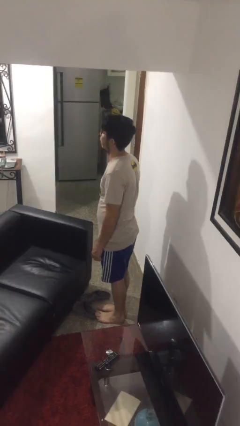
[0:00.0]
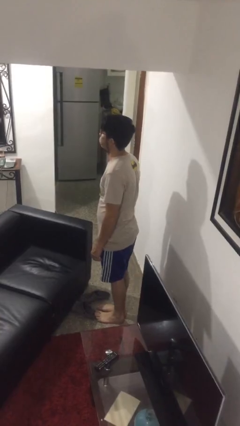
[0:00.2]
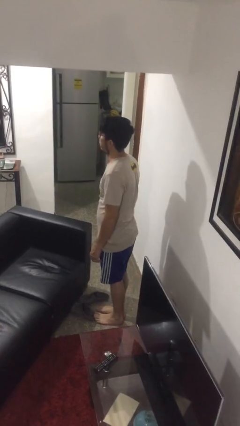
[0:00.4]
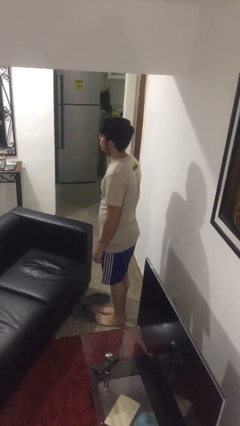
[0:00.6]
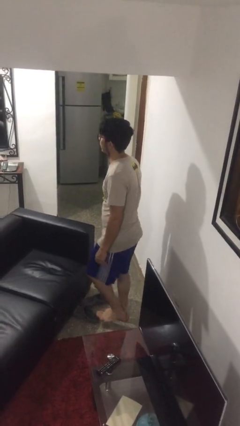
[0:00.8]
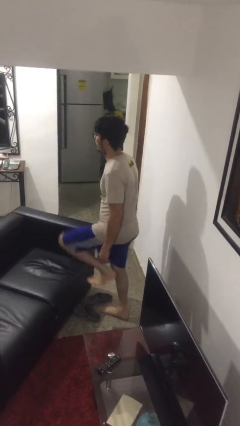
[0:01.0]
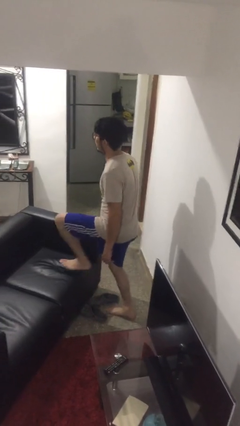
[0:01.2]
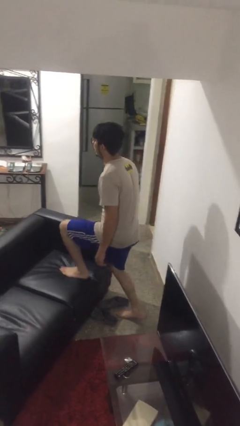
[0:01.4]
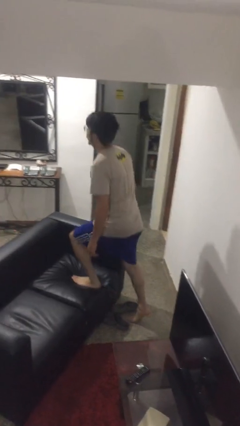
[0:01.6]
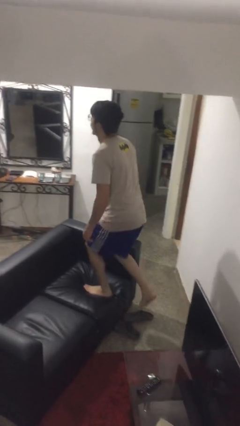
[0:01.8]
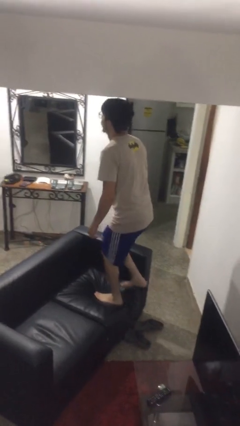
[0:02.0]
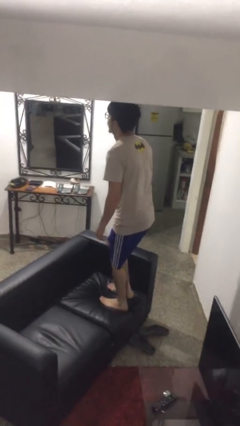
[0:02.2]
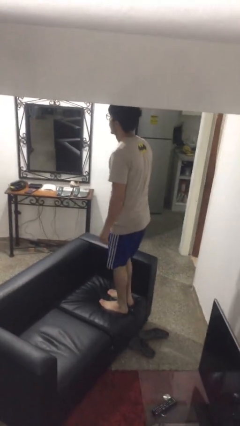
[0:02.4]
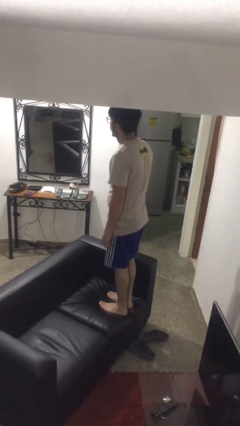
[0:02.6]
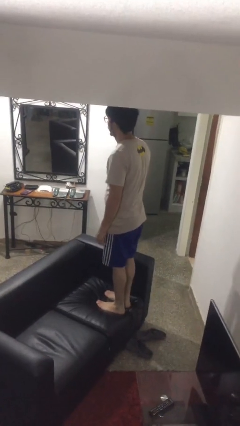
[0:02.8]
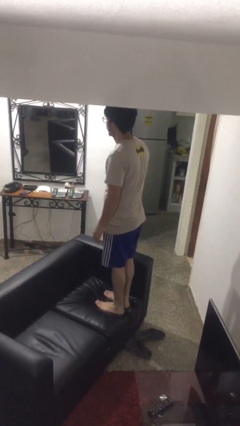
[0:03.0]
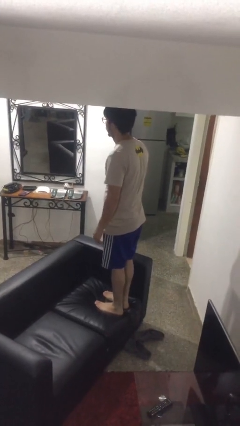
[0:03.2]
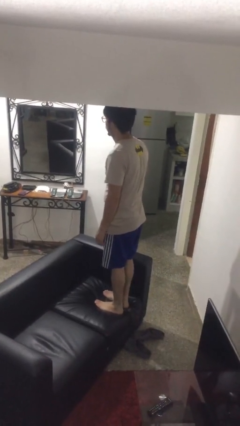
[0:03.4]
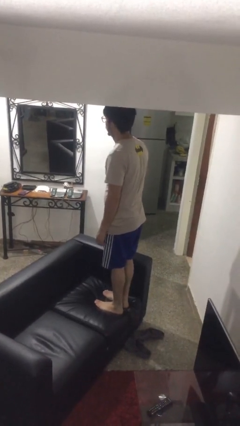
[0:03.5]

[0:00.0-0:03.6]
person climbs on couch

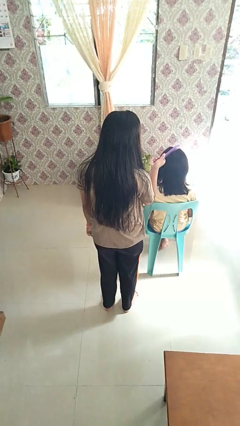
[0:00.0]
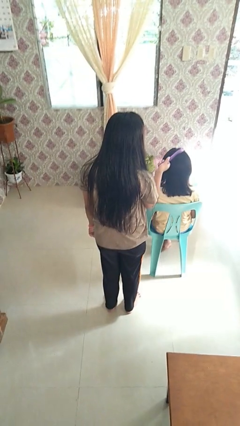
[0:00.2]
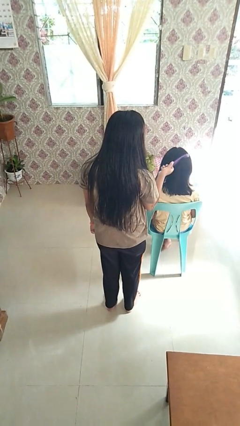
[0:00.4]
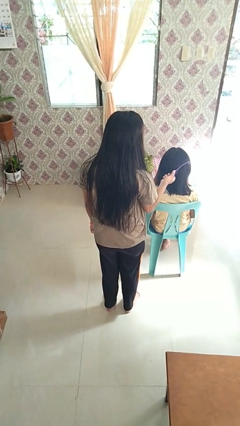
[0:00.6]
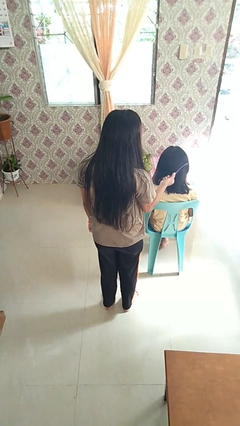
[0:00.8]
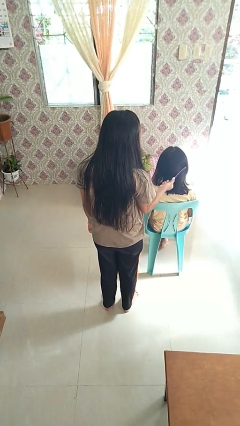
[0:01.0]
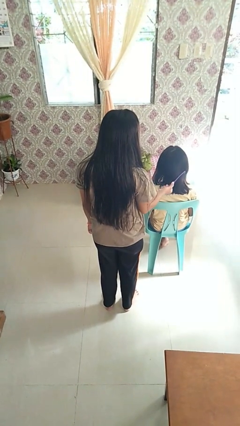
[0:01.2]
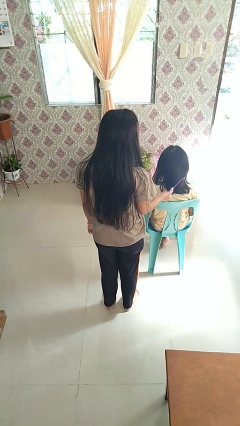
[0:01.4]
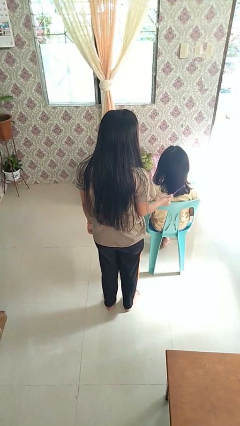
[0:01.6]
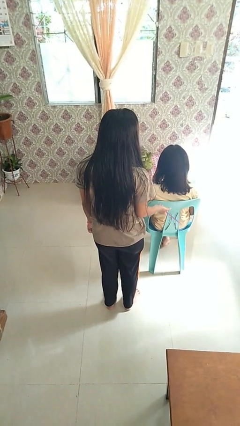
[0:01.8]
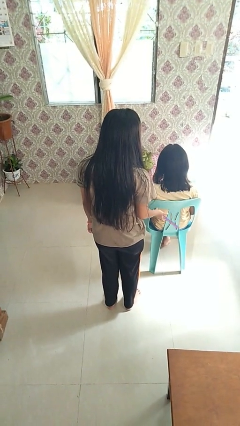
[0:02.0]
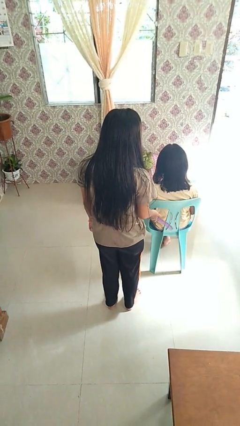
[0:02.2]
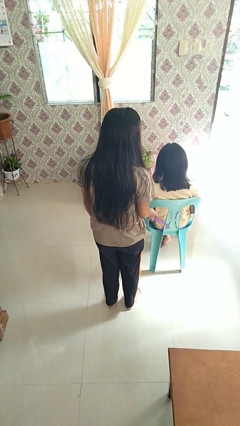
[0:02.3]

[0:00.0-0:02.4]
person brushes hair of person

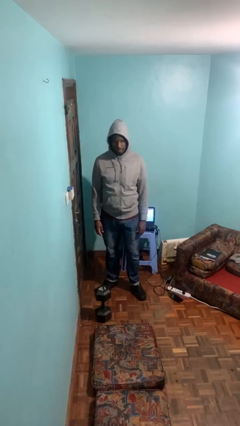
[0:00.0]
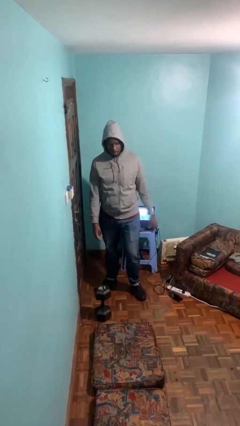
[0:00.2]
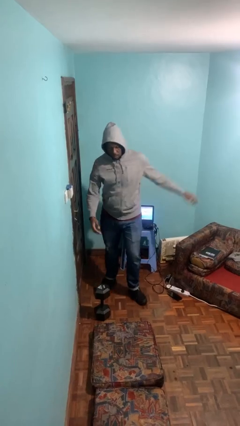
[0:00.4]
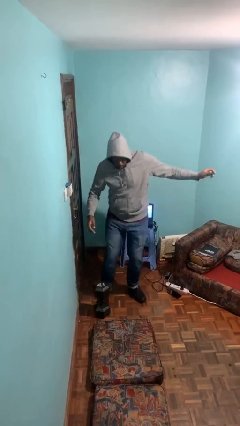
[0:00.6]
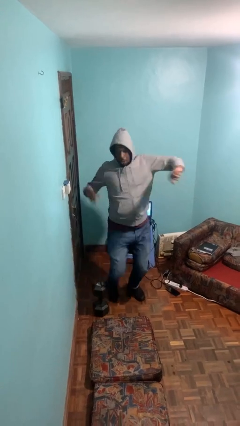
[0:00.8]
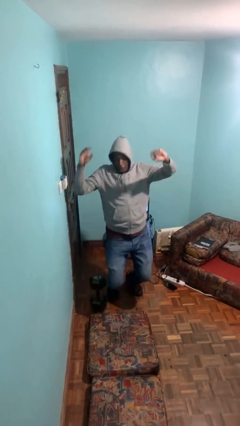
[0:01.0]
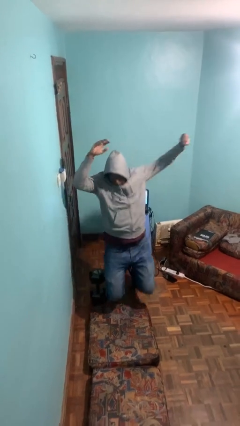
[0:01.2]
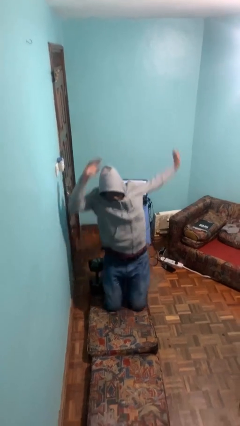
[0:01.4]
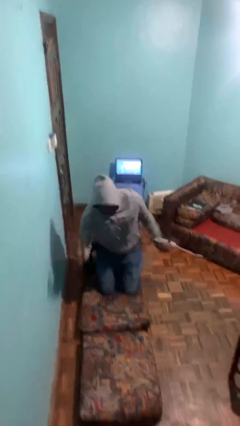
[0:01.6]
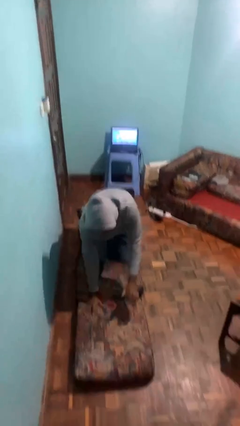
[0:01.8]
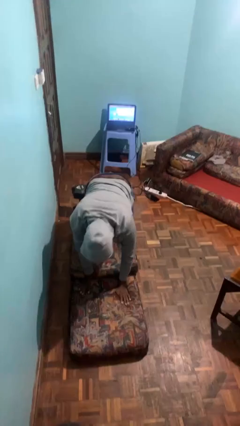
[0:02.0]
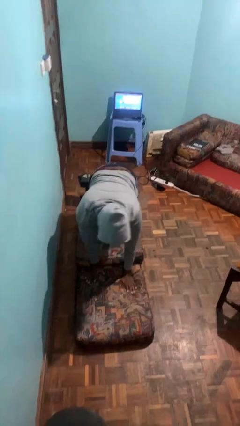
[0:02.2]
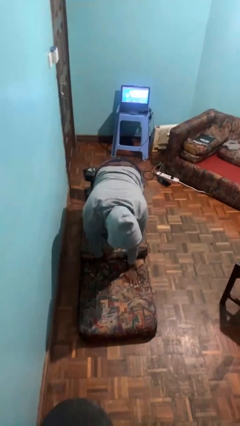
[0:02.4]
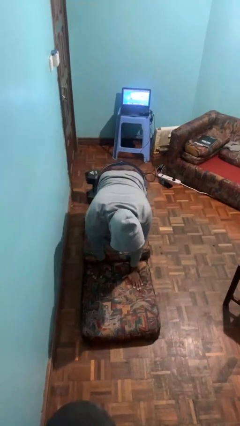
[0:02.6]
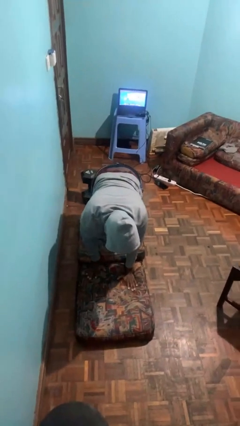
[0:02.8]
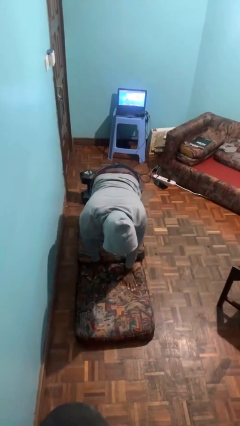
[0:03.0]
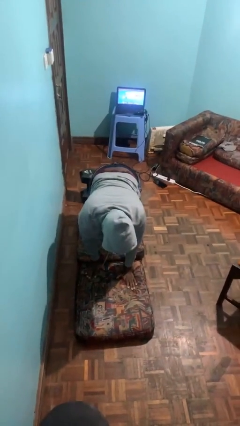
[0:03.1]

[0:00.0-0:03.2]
person trips on object on floor

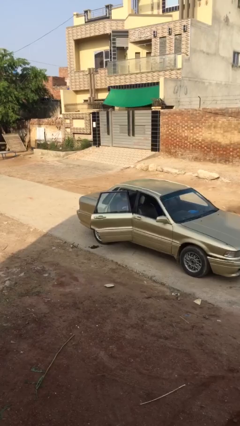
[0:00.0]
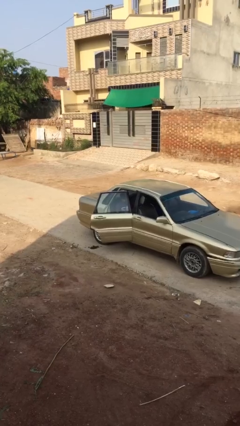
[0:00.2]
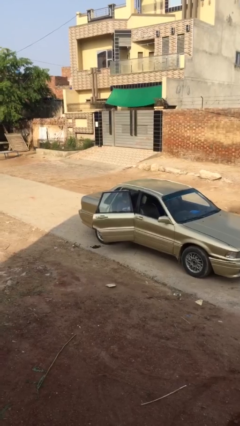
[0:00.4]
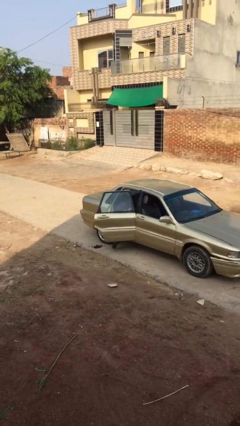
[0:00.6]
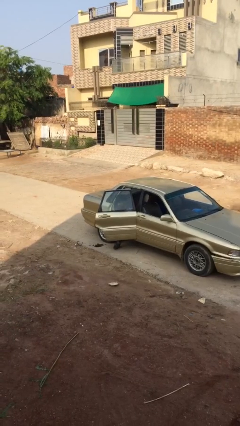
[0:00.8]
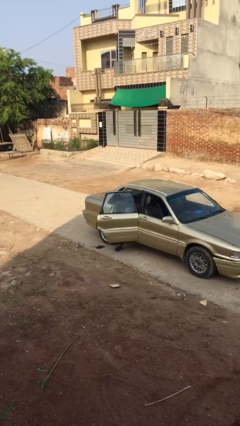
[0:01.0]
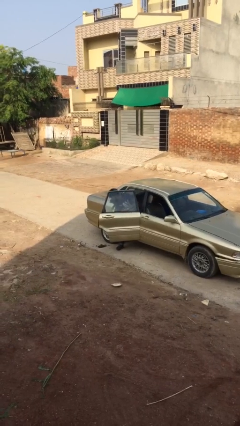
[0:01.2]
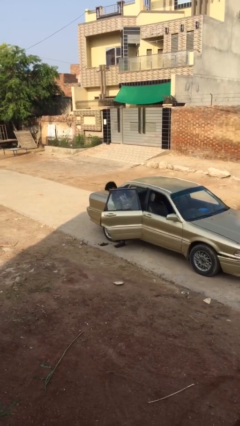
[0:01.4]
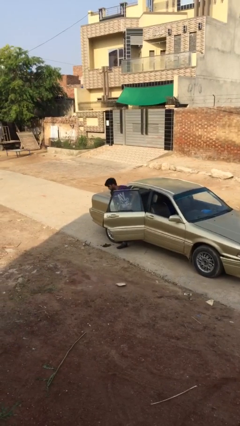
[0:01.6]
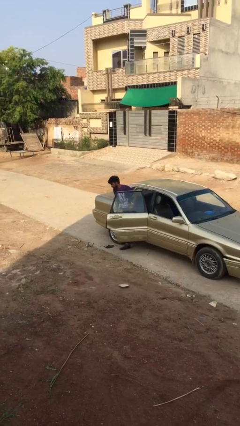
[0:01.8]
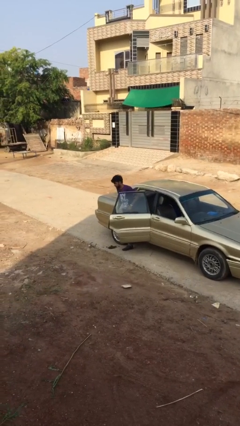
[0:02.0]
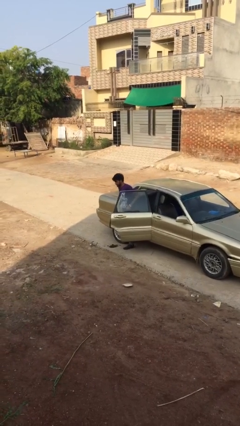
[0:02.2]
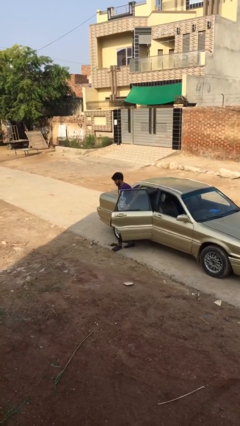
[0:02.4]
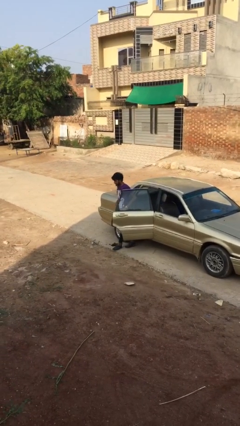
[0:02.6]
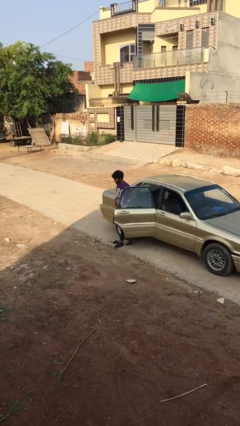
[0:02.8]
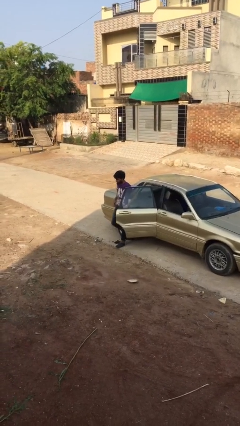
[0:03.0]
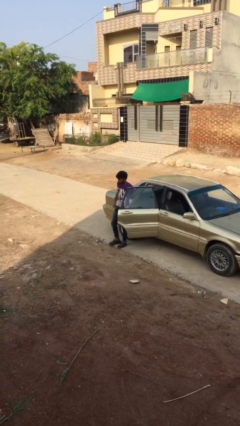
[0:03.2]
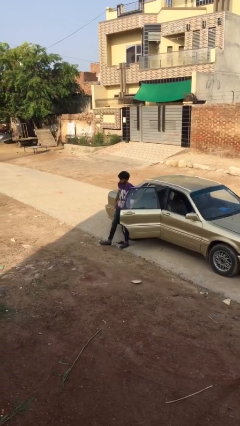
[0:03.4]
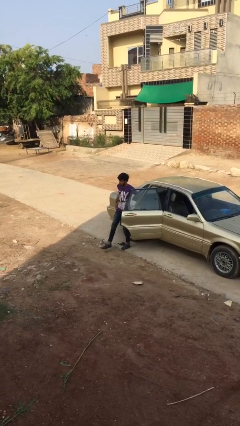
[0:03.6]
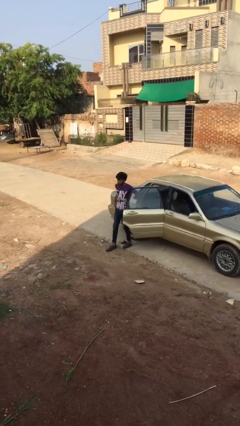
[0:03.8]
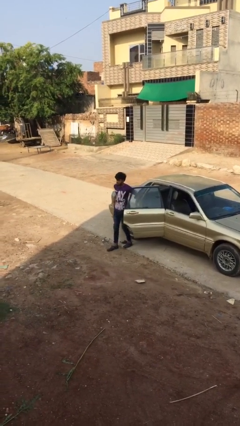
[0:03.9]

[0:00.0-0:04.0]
person exits car

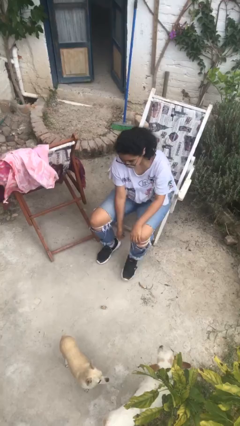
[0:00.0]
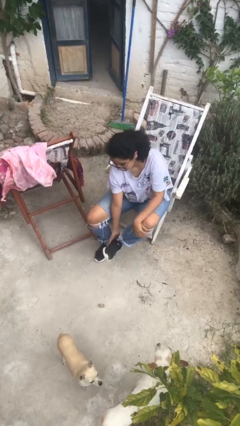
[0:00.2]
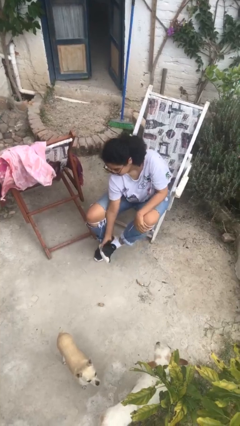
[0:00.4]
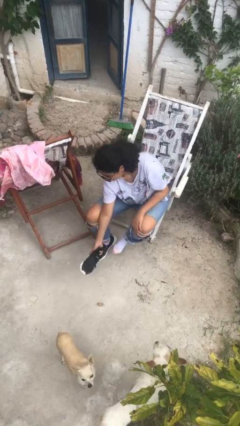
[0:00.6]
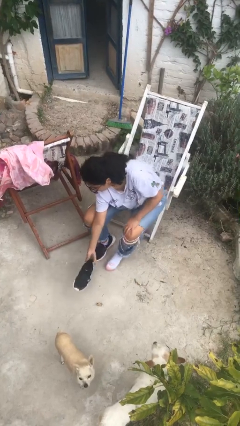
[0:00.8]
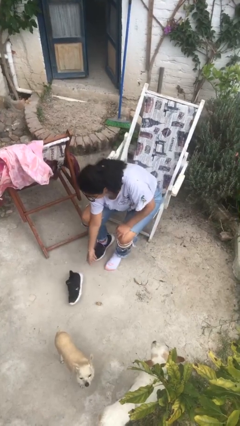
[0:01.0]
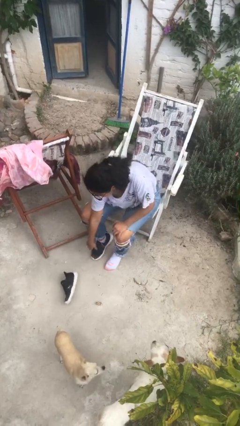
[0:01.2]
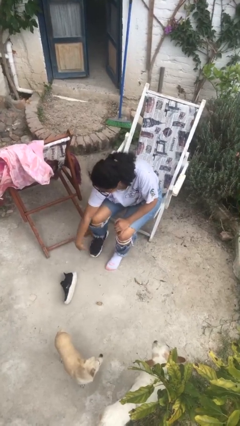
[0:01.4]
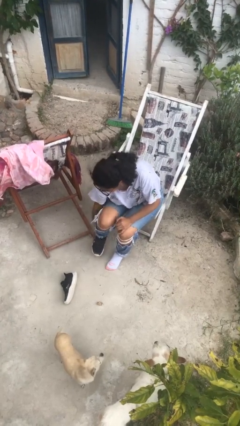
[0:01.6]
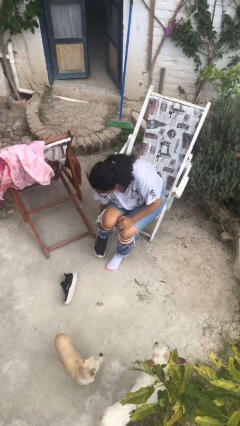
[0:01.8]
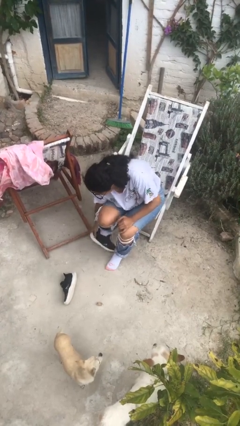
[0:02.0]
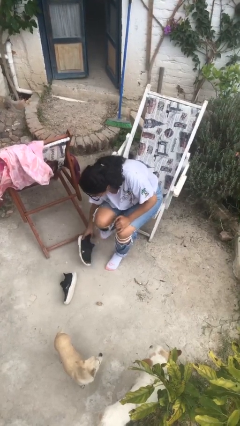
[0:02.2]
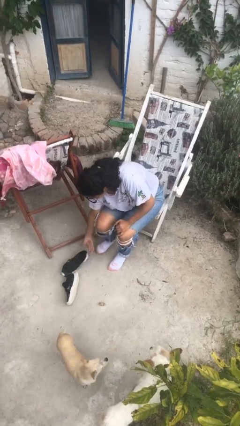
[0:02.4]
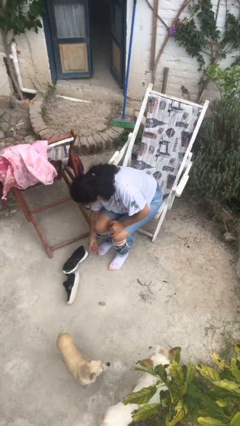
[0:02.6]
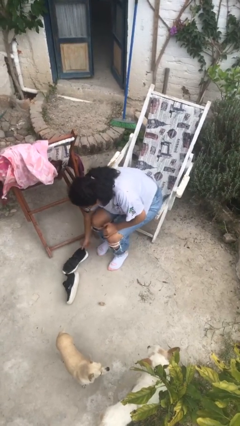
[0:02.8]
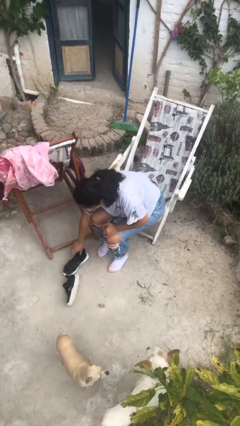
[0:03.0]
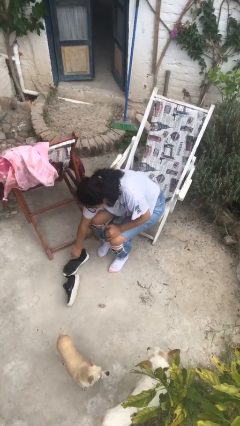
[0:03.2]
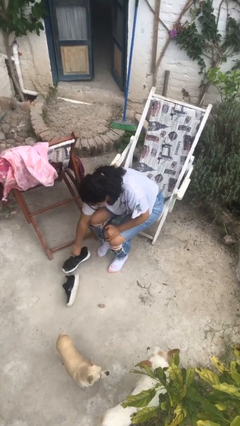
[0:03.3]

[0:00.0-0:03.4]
person takes off shoes

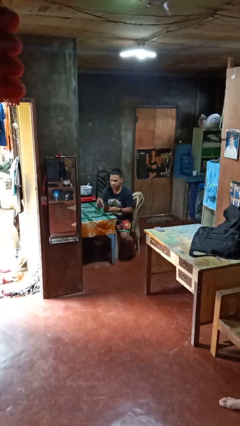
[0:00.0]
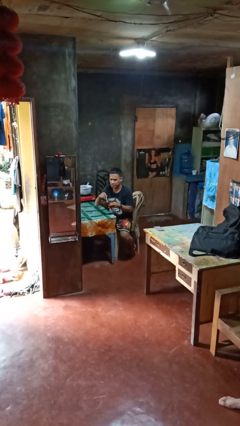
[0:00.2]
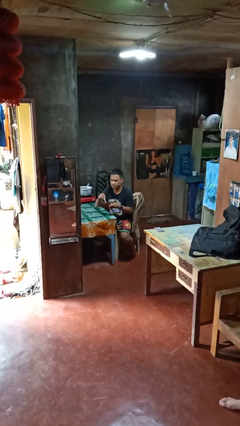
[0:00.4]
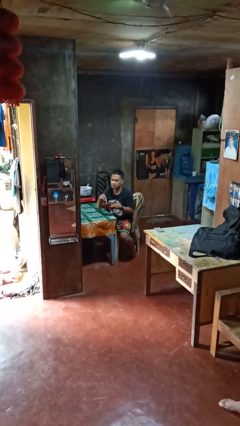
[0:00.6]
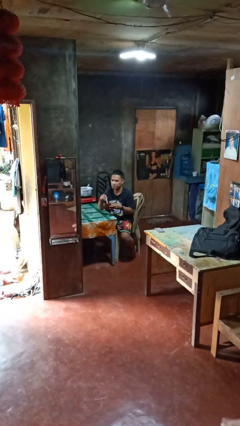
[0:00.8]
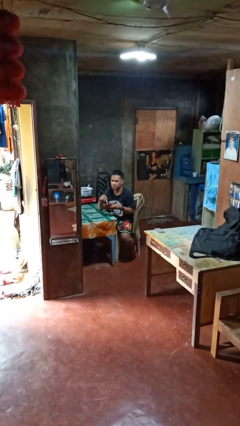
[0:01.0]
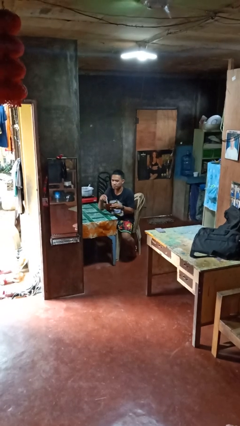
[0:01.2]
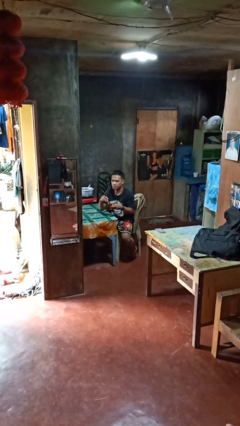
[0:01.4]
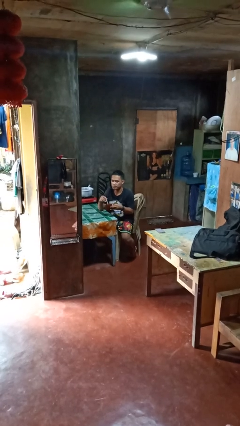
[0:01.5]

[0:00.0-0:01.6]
person stirs mug
